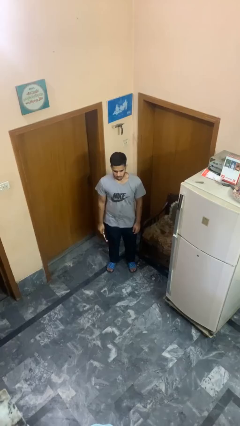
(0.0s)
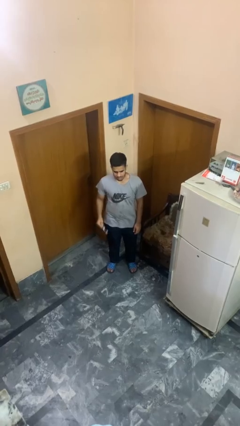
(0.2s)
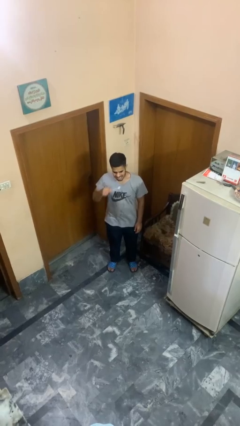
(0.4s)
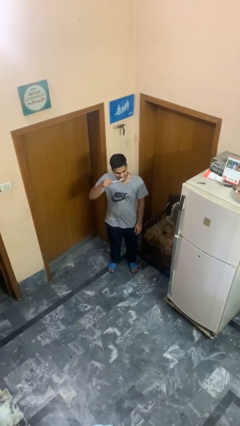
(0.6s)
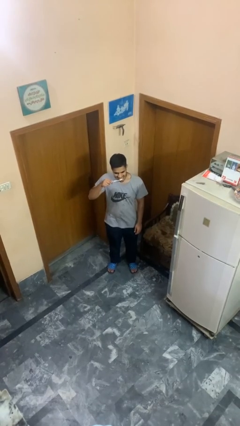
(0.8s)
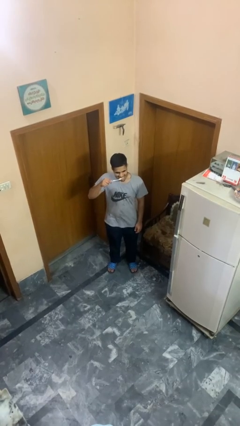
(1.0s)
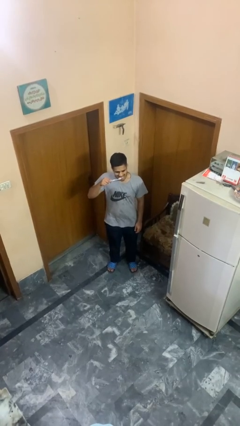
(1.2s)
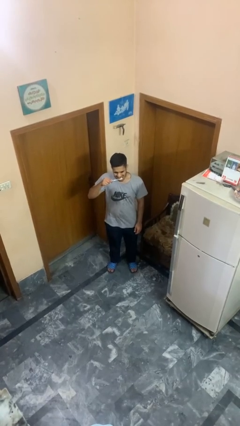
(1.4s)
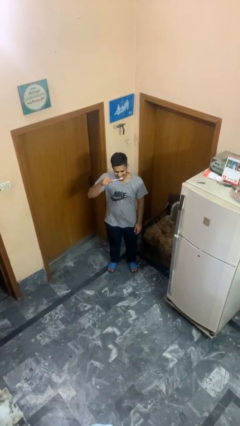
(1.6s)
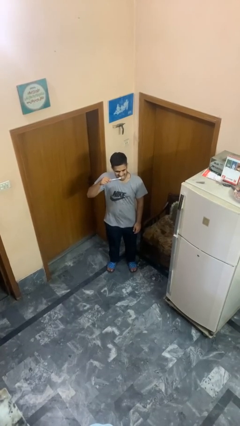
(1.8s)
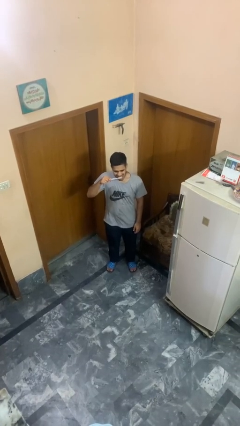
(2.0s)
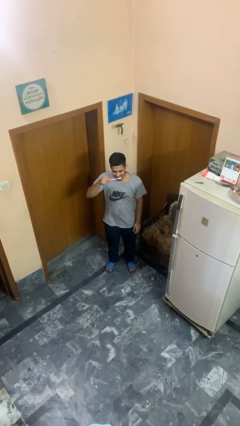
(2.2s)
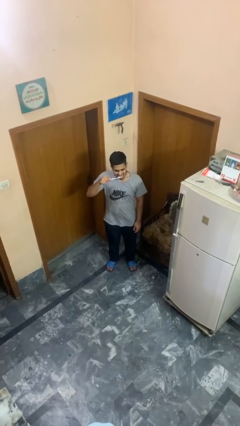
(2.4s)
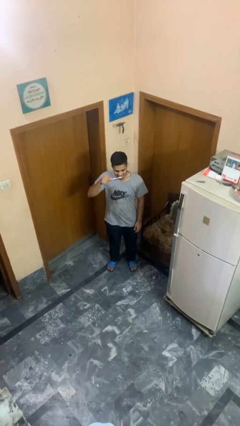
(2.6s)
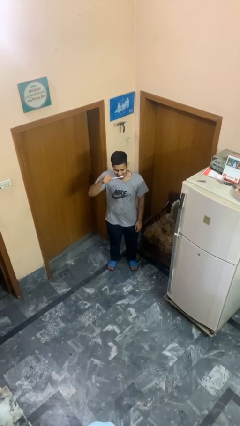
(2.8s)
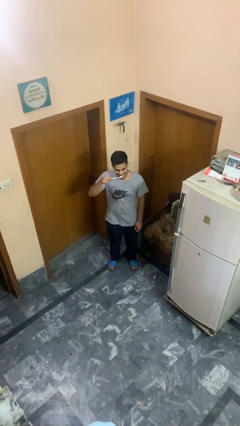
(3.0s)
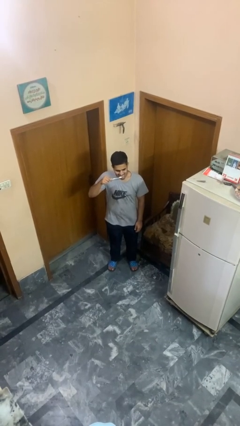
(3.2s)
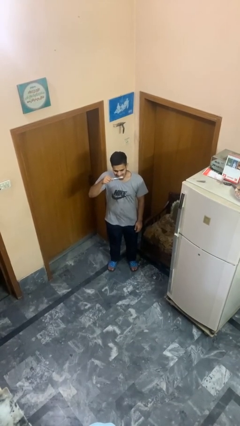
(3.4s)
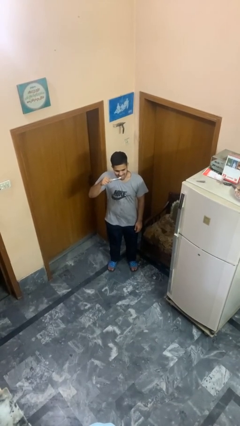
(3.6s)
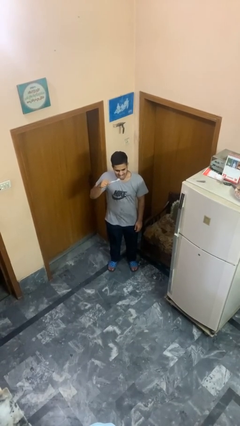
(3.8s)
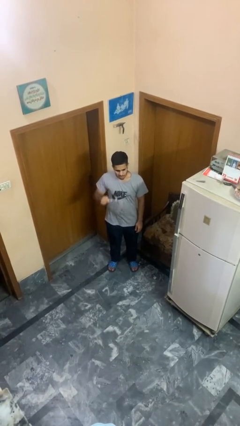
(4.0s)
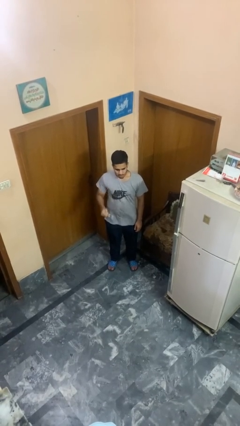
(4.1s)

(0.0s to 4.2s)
person brushes teeth

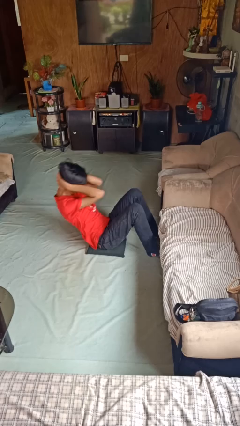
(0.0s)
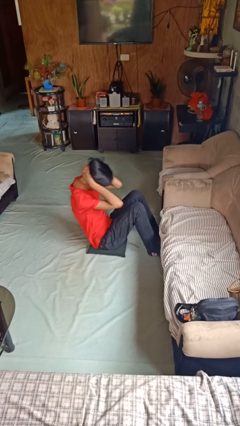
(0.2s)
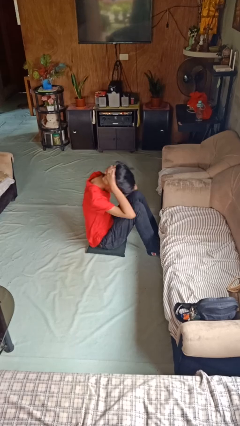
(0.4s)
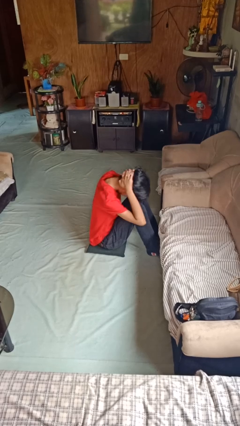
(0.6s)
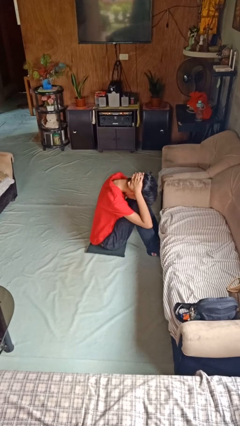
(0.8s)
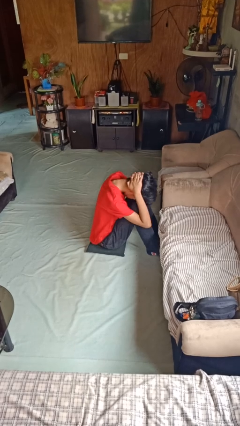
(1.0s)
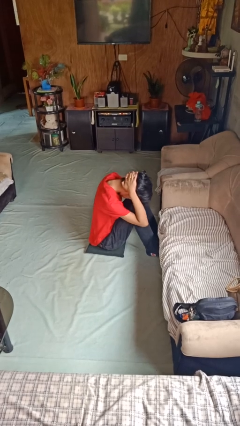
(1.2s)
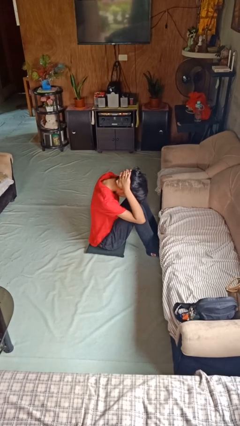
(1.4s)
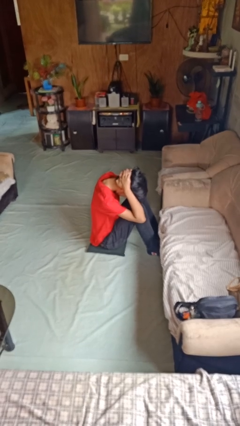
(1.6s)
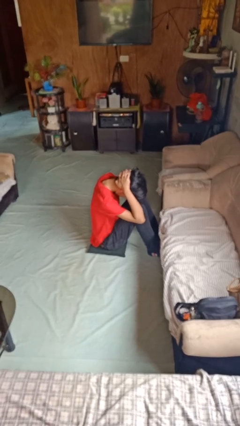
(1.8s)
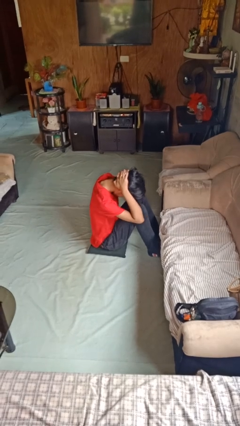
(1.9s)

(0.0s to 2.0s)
person exercises with situp

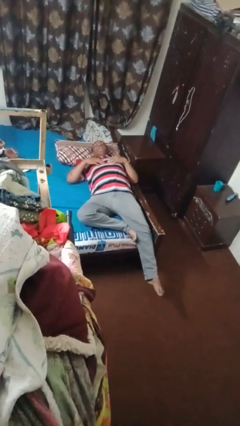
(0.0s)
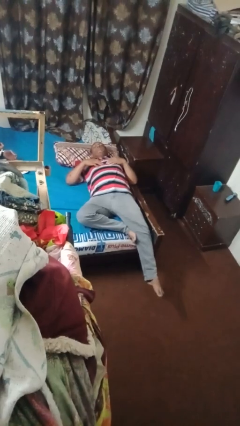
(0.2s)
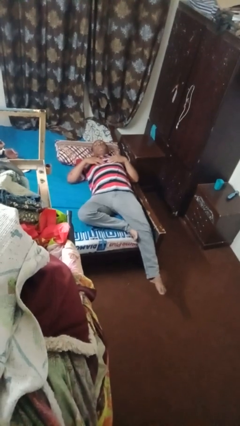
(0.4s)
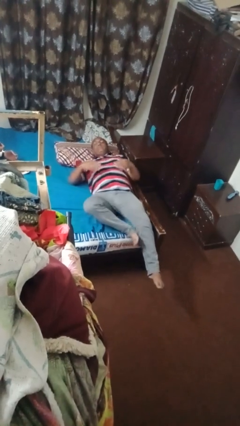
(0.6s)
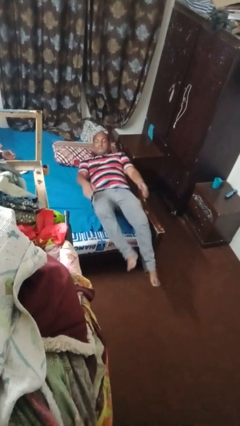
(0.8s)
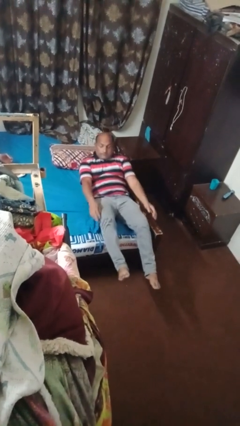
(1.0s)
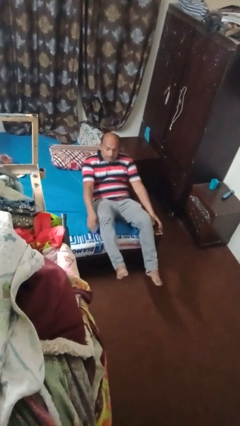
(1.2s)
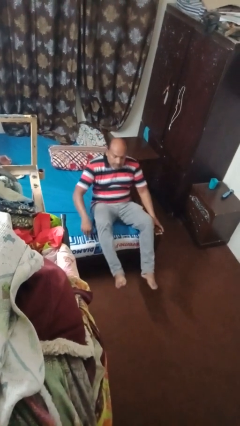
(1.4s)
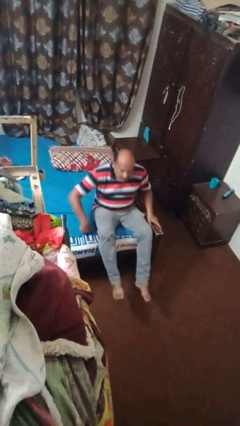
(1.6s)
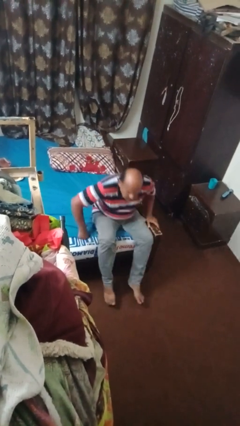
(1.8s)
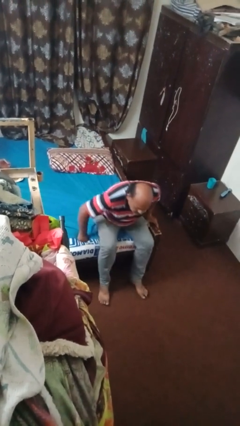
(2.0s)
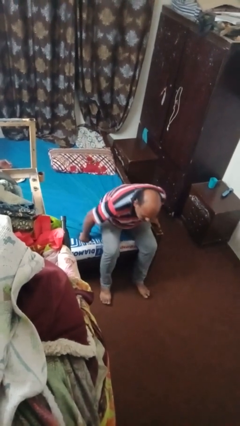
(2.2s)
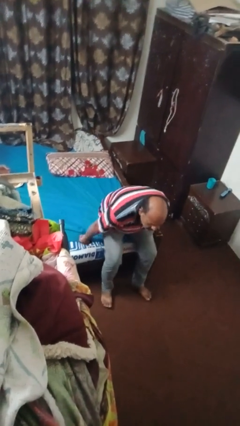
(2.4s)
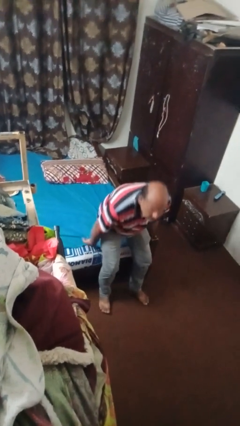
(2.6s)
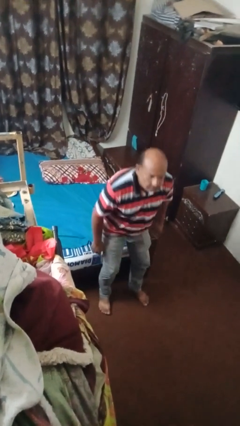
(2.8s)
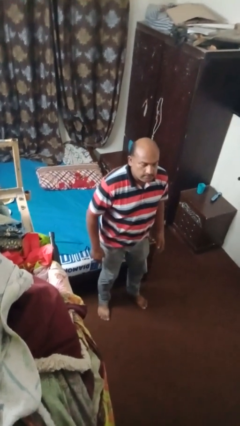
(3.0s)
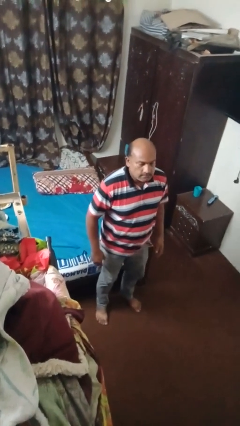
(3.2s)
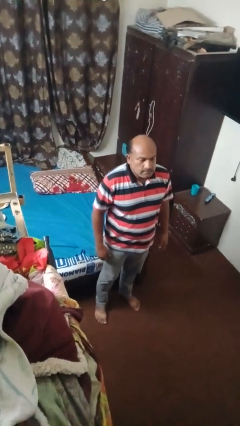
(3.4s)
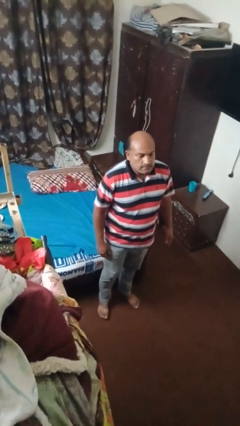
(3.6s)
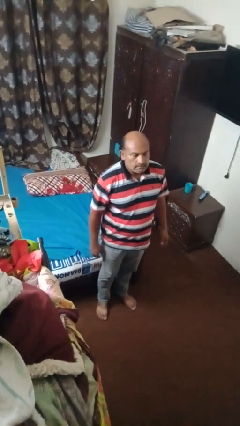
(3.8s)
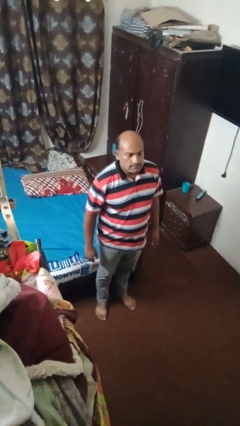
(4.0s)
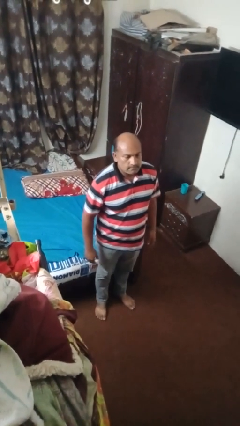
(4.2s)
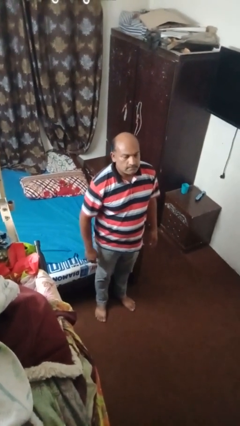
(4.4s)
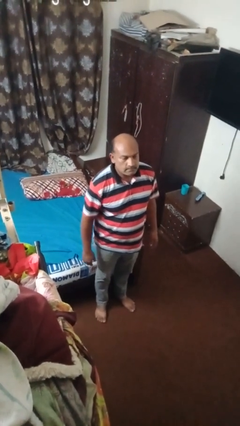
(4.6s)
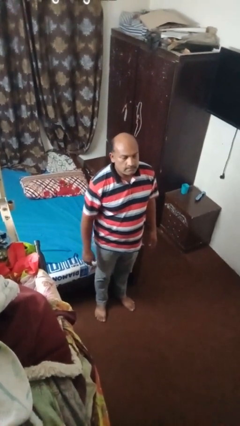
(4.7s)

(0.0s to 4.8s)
person stands up

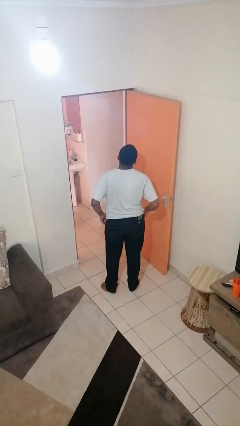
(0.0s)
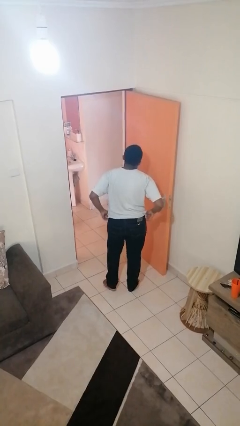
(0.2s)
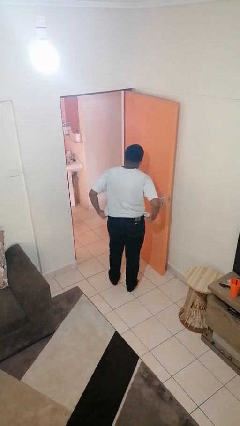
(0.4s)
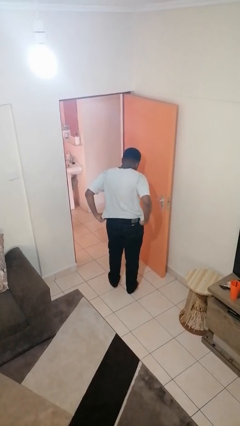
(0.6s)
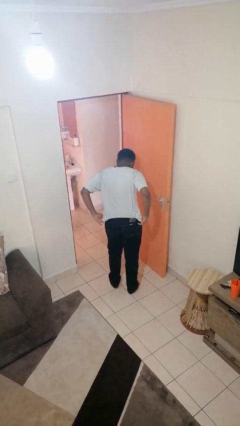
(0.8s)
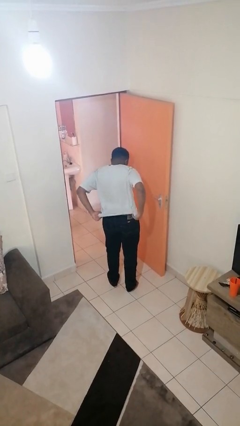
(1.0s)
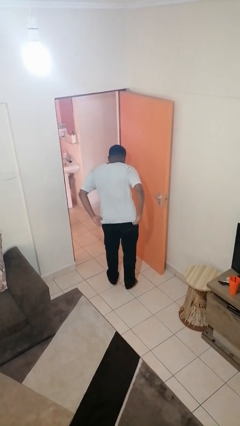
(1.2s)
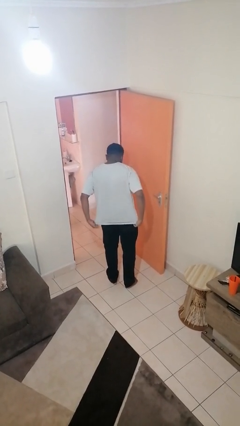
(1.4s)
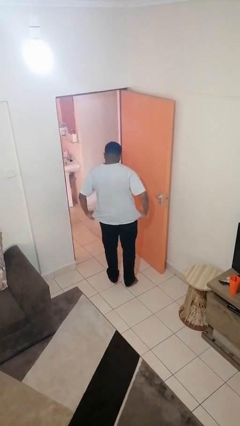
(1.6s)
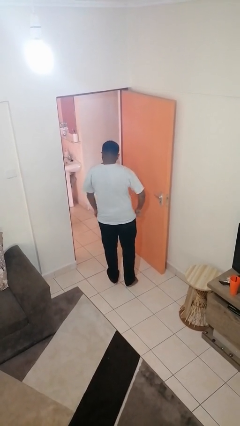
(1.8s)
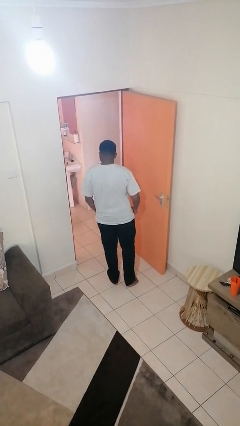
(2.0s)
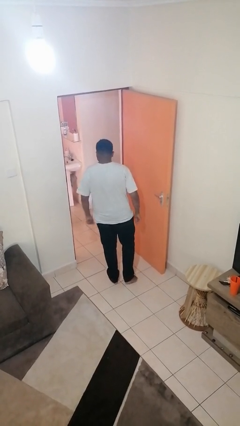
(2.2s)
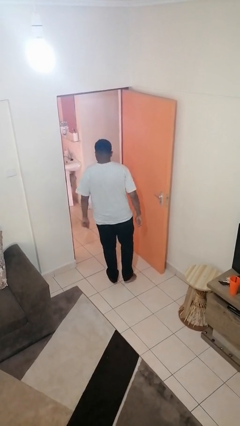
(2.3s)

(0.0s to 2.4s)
person untucks shirt

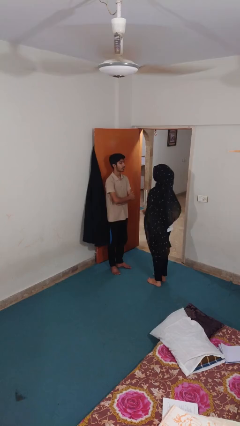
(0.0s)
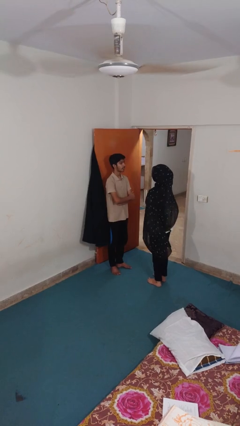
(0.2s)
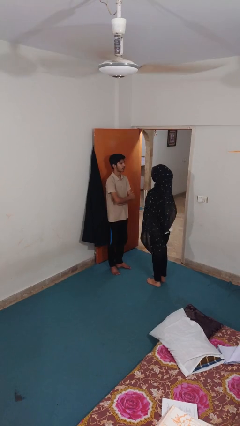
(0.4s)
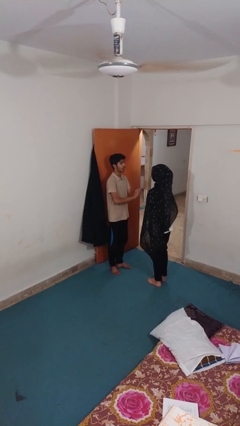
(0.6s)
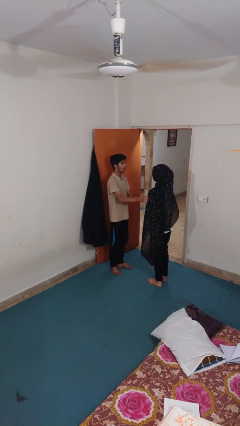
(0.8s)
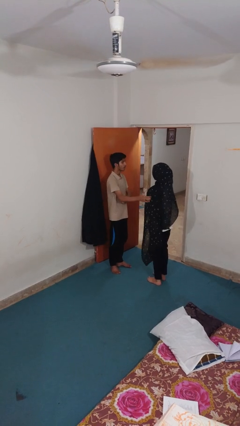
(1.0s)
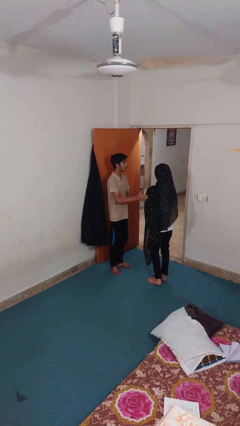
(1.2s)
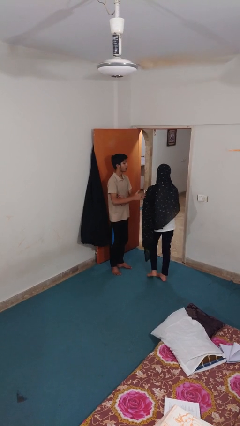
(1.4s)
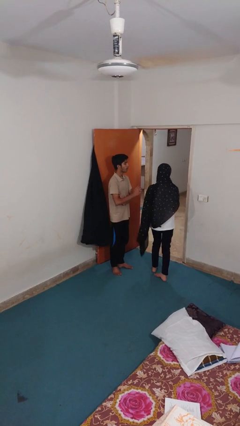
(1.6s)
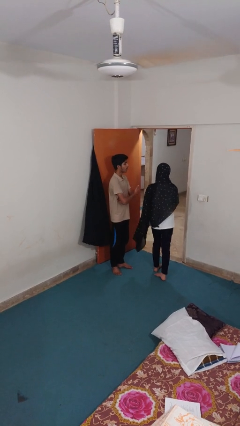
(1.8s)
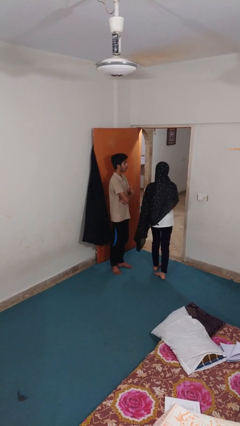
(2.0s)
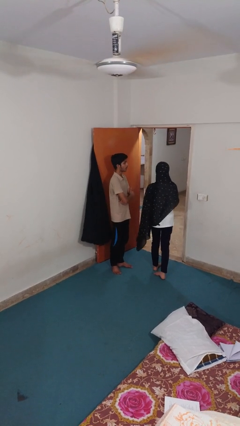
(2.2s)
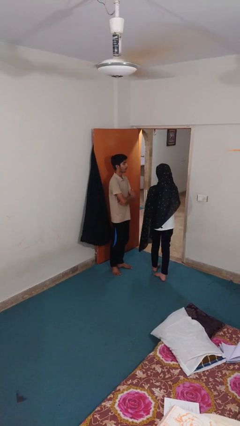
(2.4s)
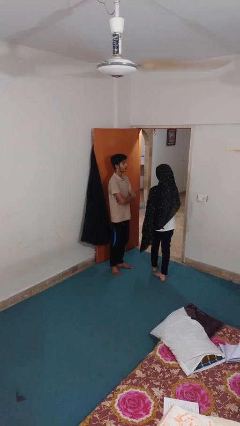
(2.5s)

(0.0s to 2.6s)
person shoves person

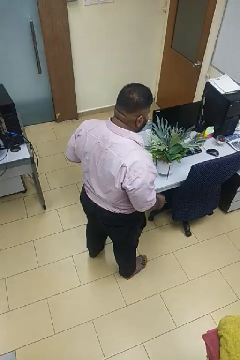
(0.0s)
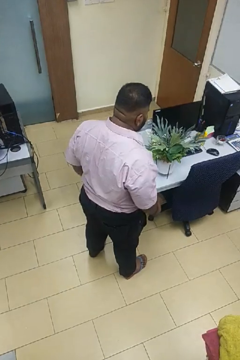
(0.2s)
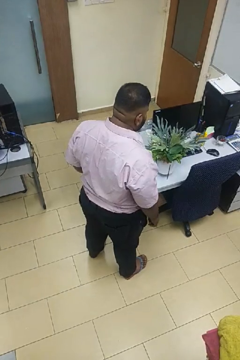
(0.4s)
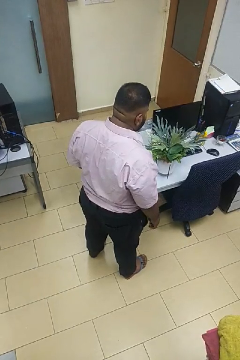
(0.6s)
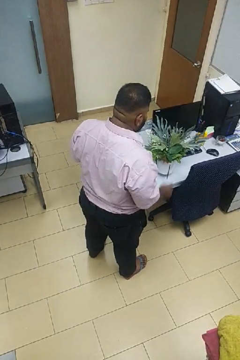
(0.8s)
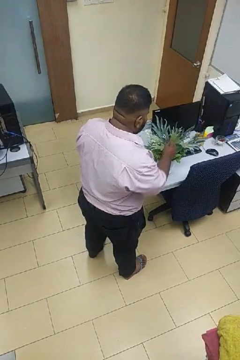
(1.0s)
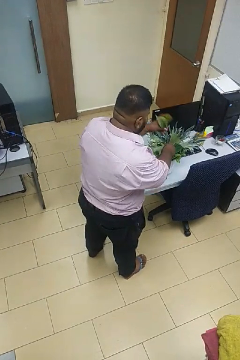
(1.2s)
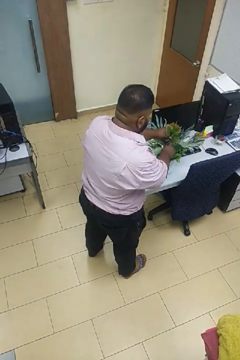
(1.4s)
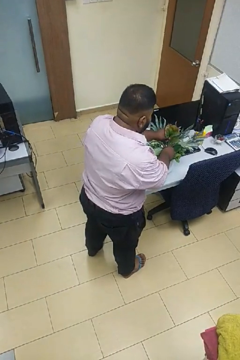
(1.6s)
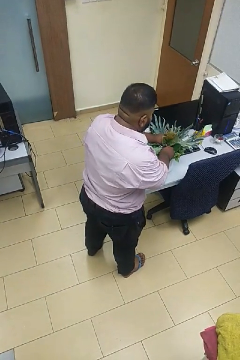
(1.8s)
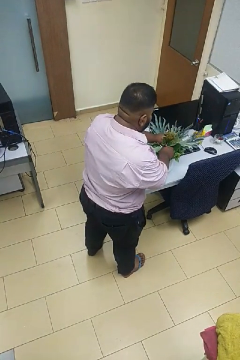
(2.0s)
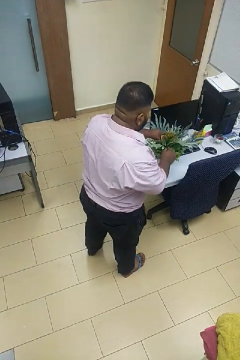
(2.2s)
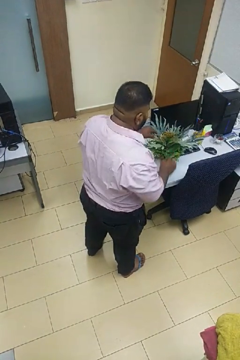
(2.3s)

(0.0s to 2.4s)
person arranges flowers in vase
